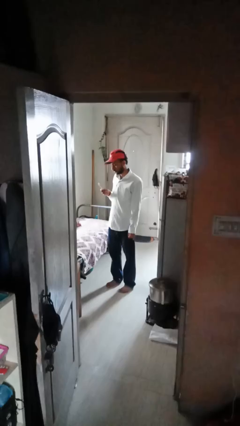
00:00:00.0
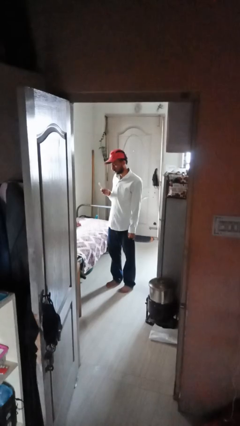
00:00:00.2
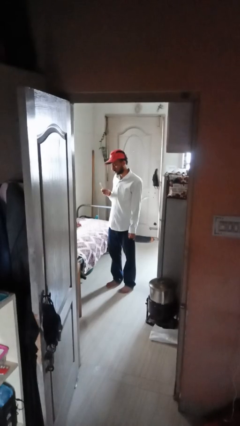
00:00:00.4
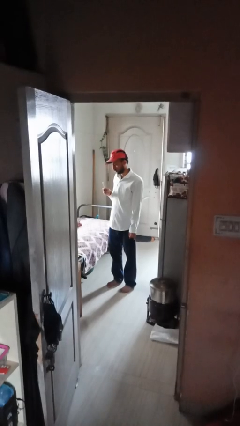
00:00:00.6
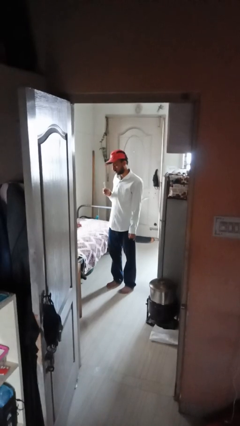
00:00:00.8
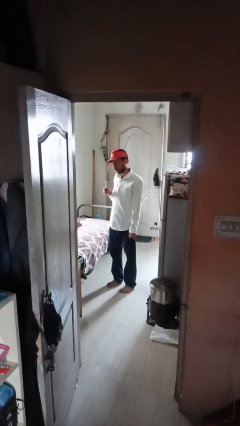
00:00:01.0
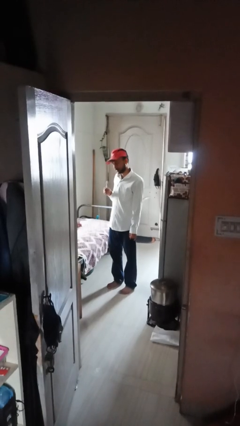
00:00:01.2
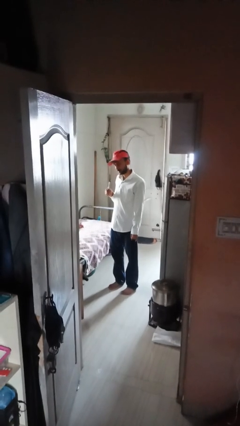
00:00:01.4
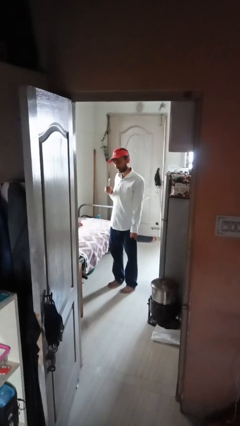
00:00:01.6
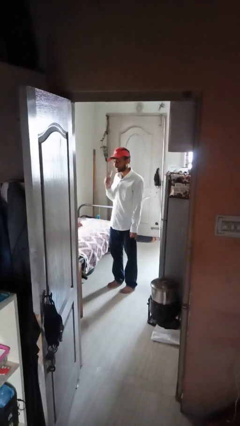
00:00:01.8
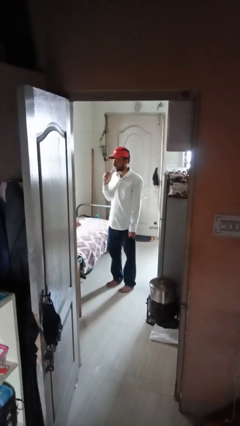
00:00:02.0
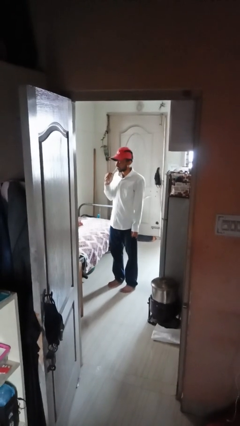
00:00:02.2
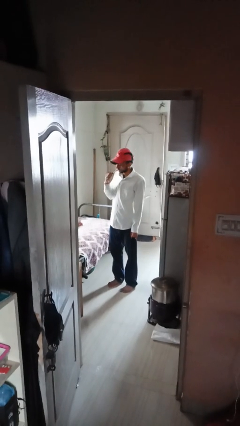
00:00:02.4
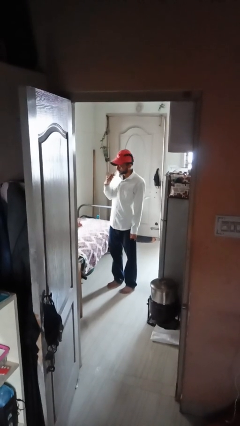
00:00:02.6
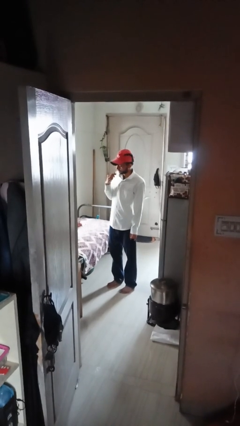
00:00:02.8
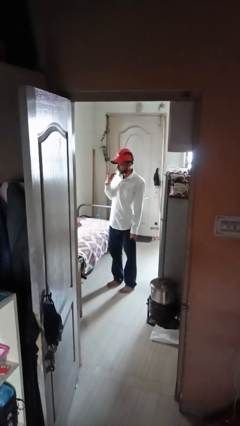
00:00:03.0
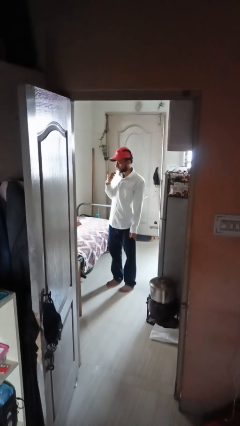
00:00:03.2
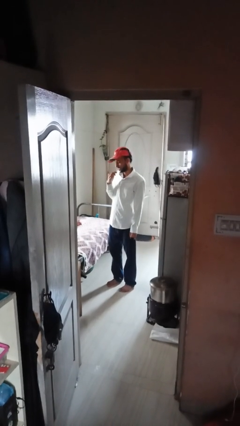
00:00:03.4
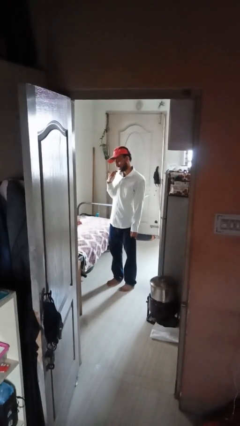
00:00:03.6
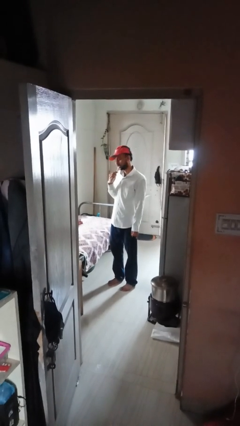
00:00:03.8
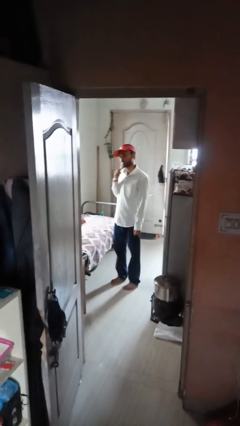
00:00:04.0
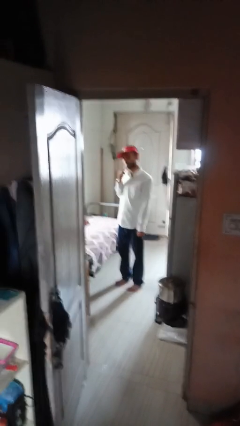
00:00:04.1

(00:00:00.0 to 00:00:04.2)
person brushes teeth

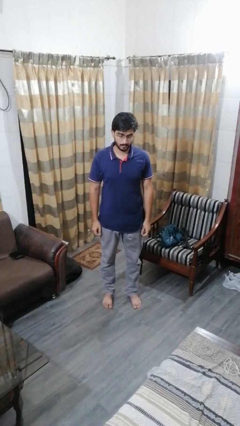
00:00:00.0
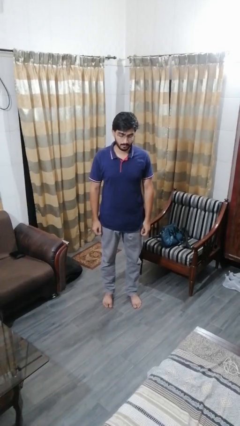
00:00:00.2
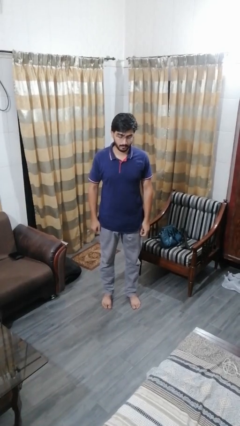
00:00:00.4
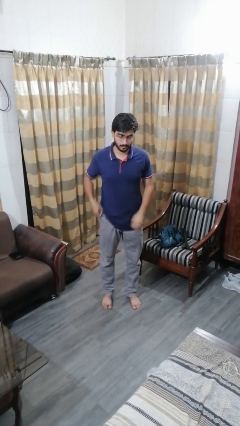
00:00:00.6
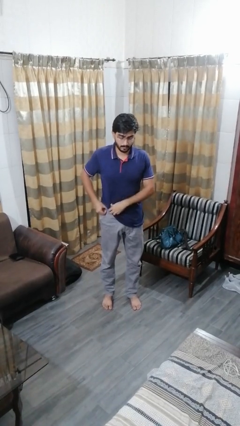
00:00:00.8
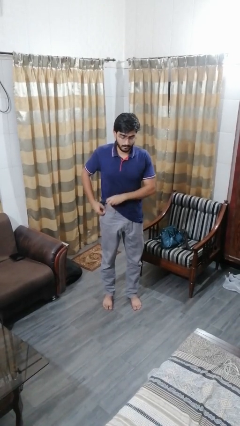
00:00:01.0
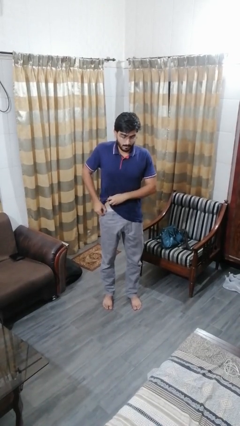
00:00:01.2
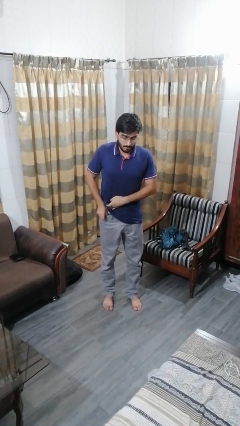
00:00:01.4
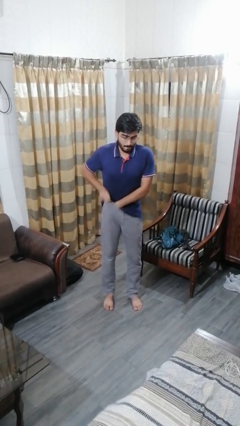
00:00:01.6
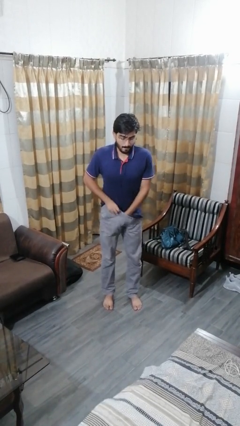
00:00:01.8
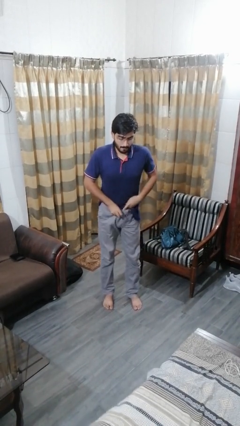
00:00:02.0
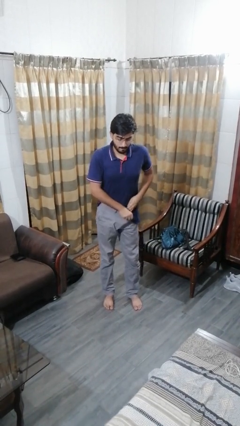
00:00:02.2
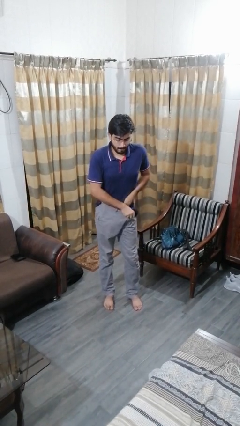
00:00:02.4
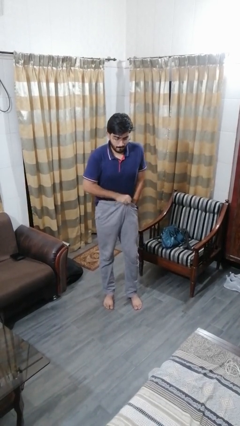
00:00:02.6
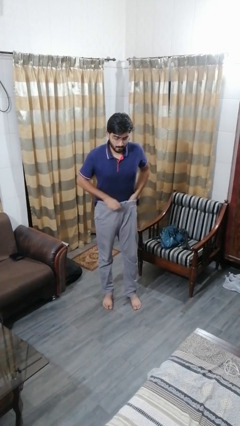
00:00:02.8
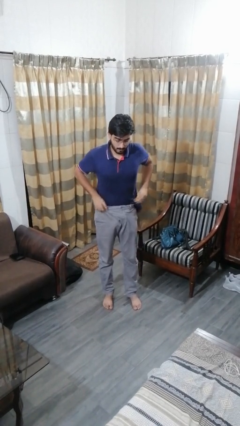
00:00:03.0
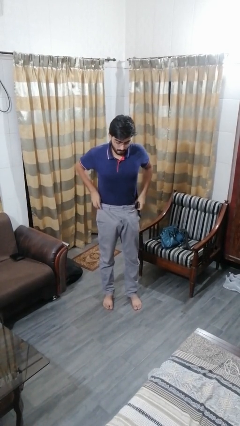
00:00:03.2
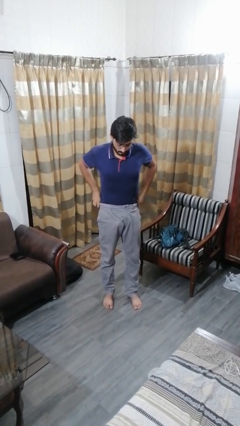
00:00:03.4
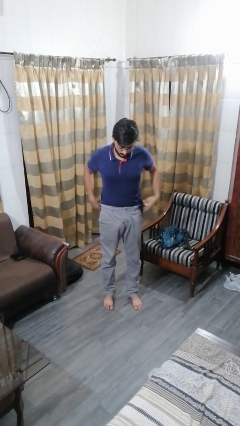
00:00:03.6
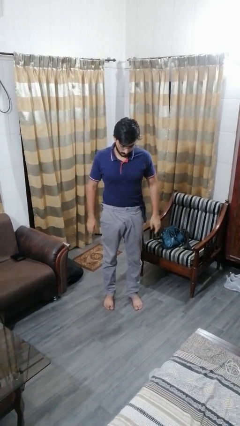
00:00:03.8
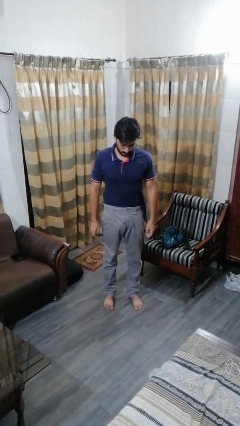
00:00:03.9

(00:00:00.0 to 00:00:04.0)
person tucks in shirt

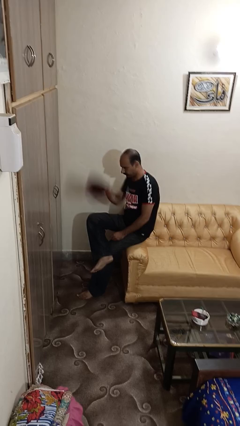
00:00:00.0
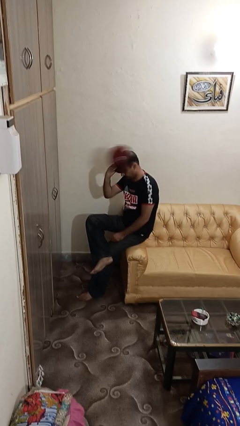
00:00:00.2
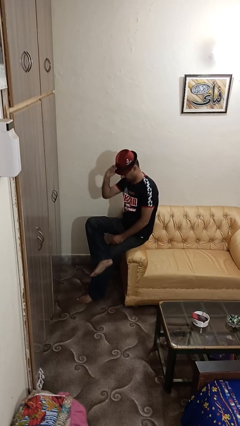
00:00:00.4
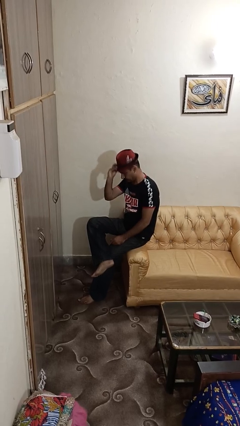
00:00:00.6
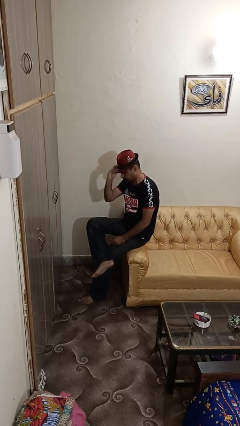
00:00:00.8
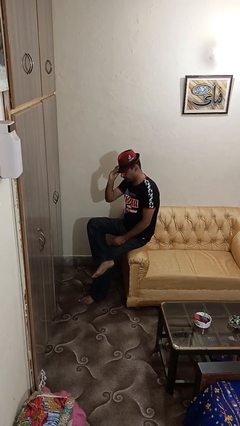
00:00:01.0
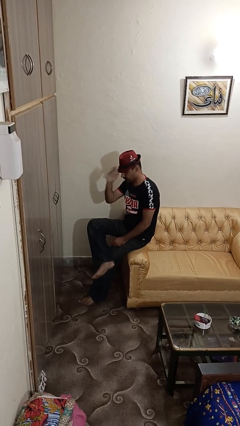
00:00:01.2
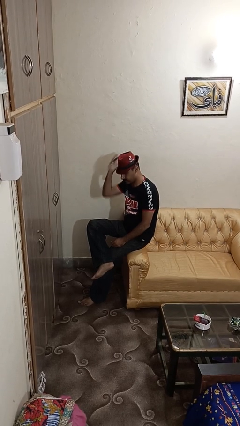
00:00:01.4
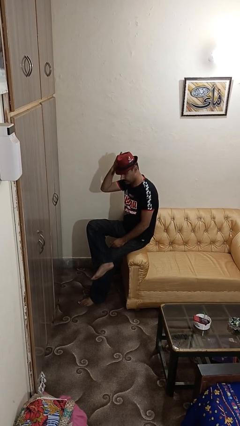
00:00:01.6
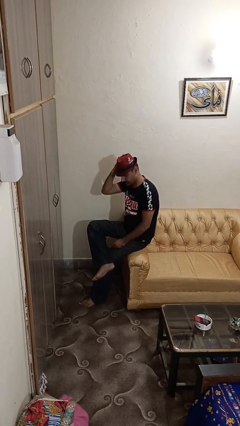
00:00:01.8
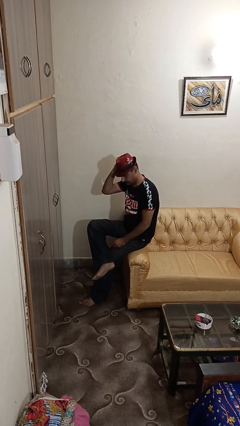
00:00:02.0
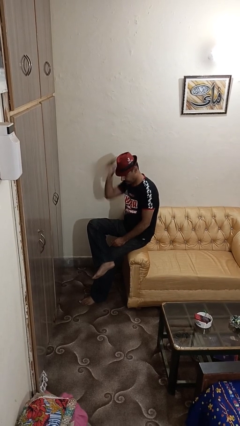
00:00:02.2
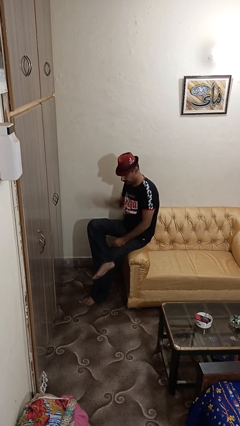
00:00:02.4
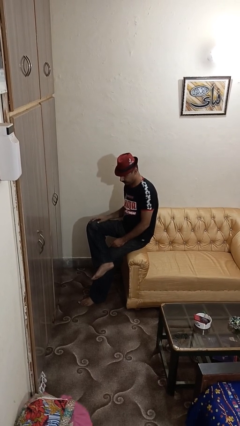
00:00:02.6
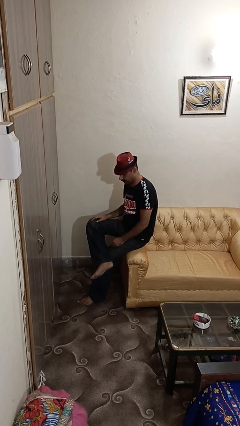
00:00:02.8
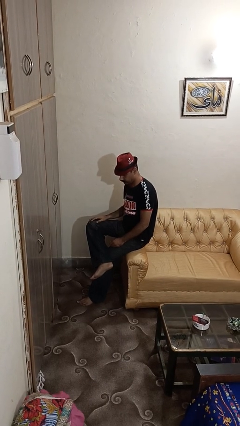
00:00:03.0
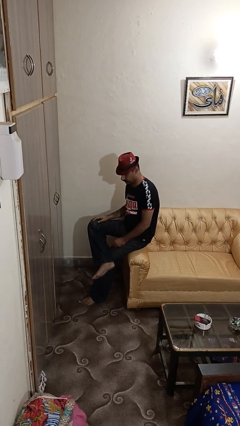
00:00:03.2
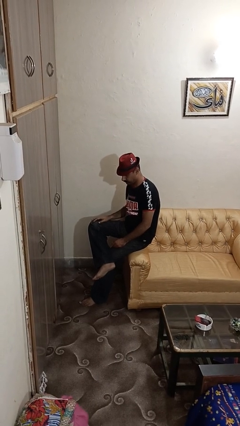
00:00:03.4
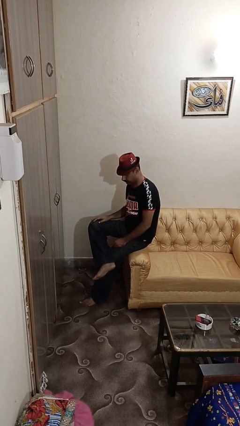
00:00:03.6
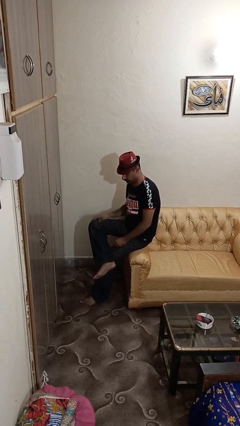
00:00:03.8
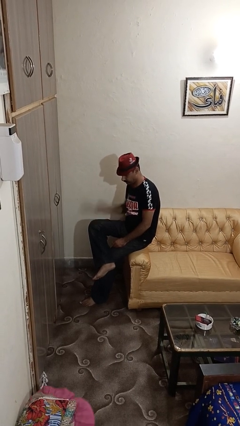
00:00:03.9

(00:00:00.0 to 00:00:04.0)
person puts on hat

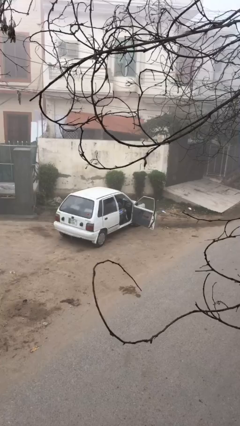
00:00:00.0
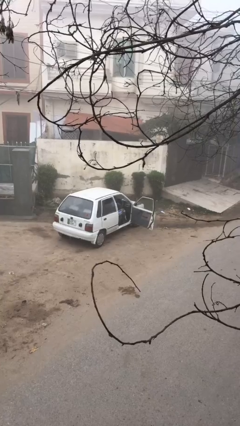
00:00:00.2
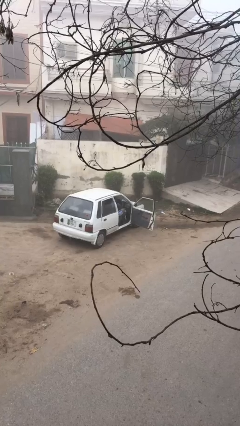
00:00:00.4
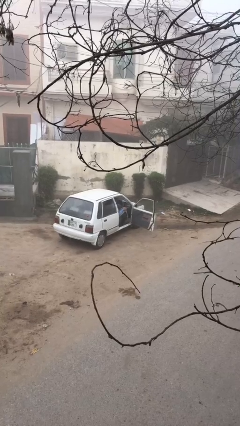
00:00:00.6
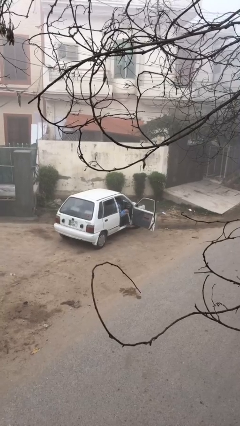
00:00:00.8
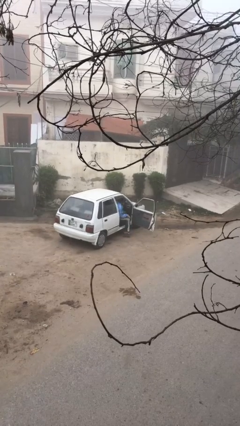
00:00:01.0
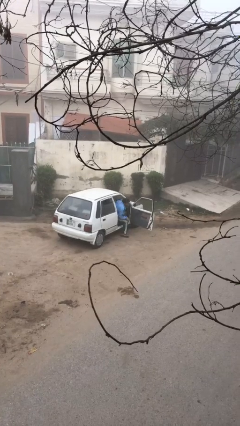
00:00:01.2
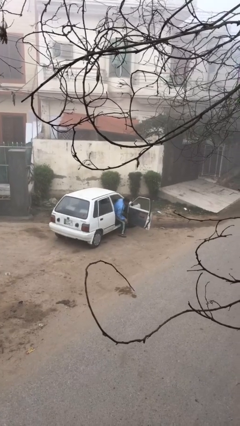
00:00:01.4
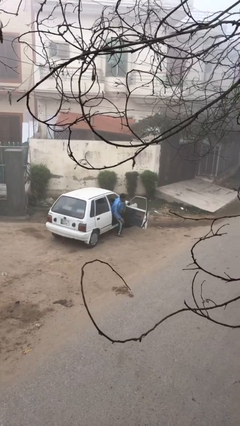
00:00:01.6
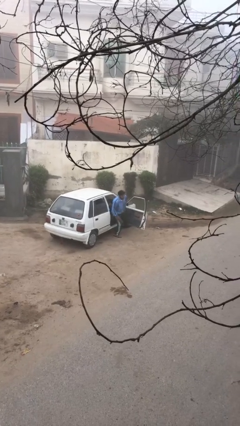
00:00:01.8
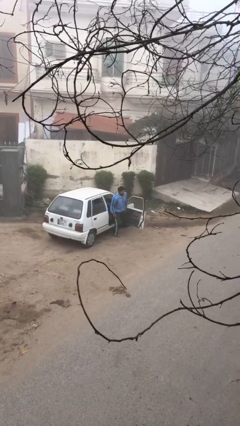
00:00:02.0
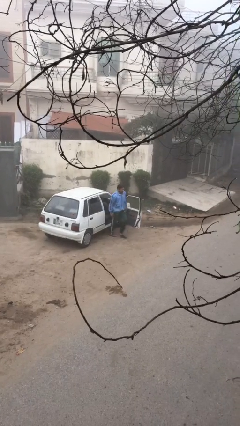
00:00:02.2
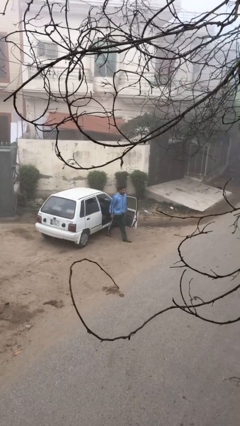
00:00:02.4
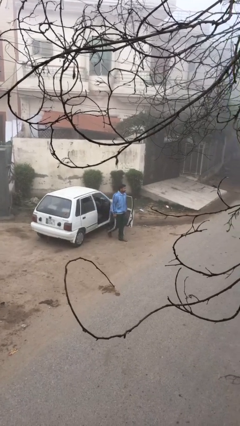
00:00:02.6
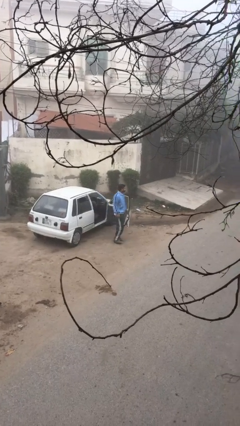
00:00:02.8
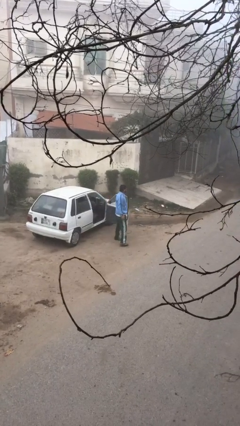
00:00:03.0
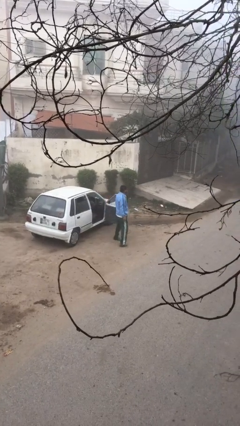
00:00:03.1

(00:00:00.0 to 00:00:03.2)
person exits car

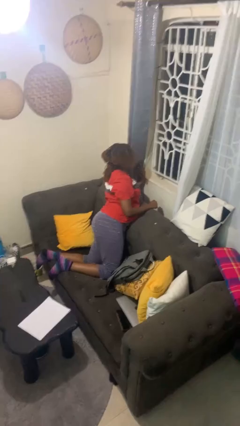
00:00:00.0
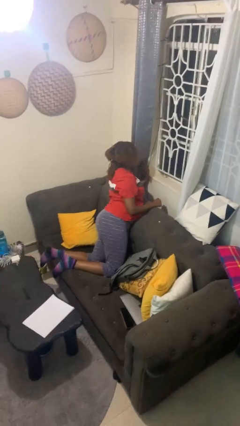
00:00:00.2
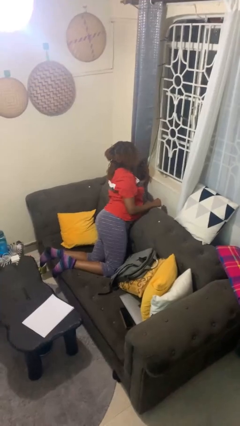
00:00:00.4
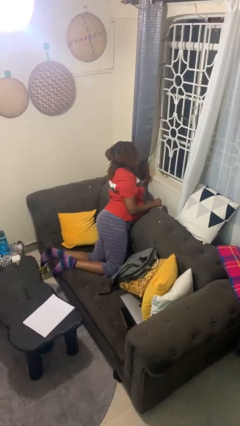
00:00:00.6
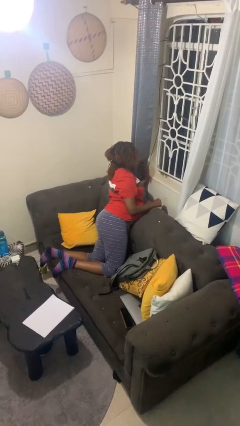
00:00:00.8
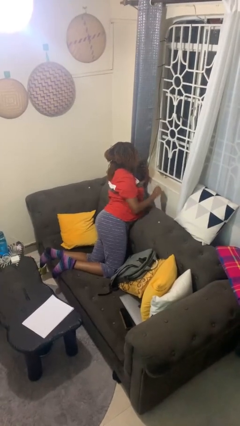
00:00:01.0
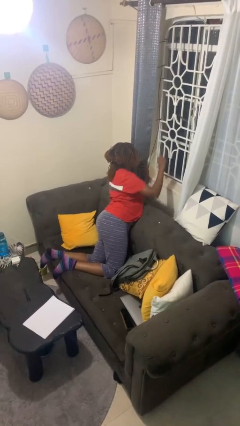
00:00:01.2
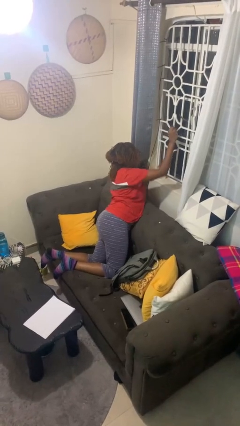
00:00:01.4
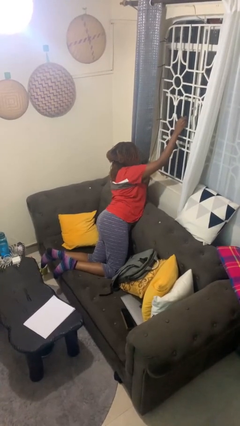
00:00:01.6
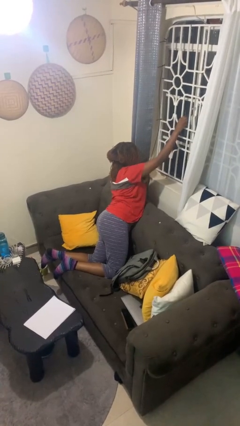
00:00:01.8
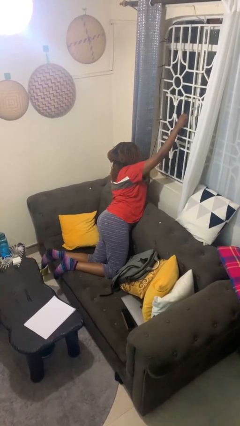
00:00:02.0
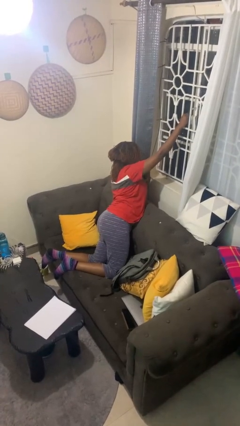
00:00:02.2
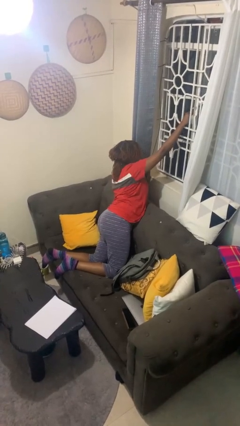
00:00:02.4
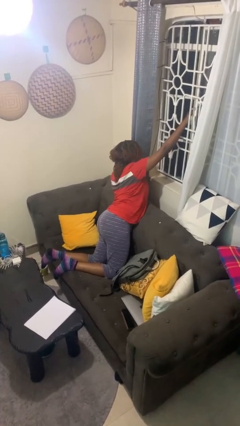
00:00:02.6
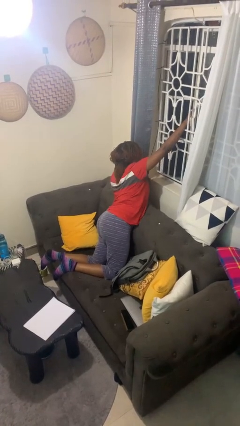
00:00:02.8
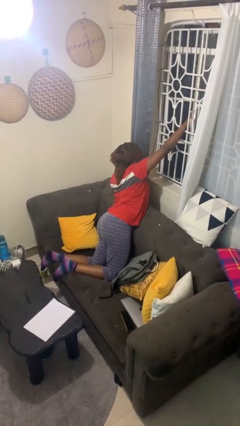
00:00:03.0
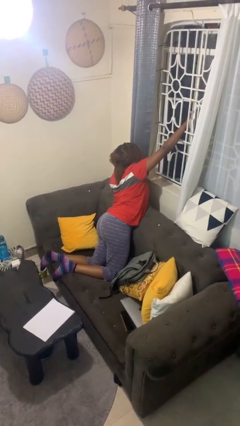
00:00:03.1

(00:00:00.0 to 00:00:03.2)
person opens home window
